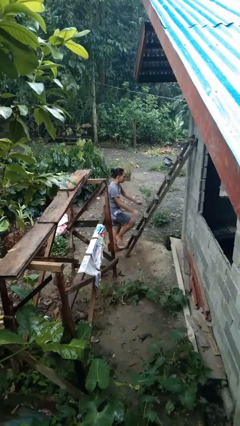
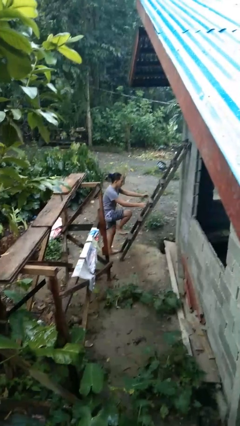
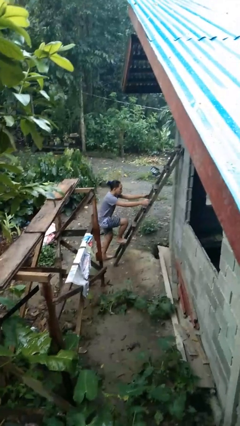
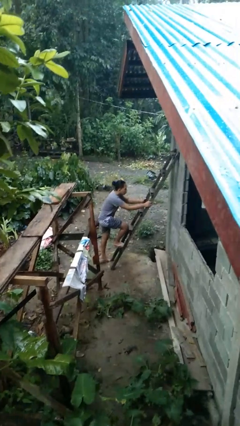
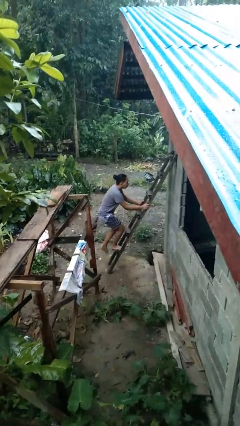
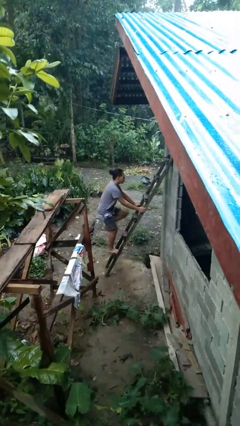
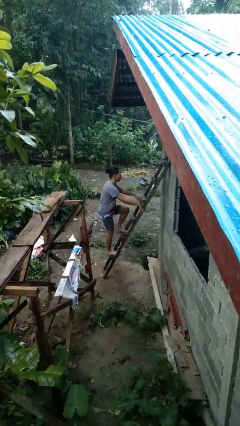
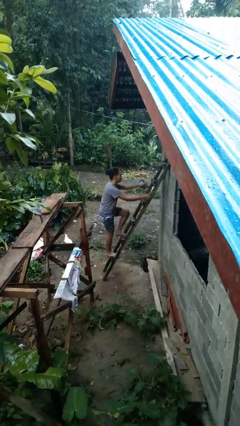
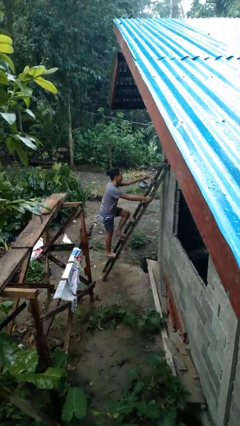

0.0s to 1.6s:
person climbs up ladder

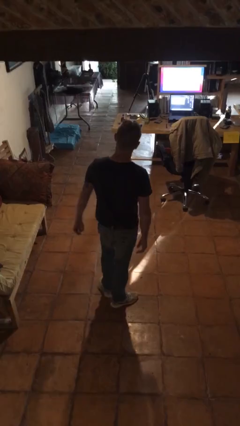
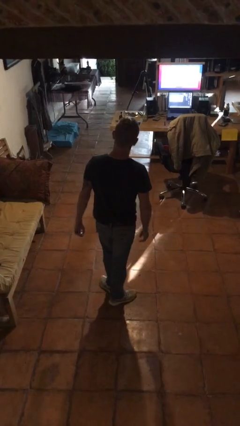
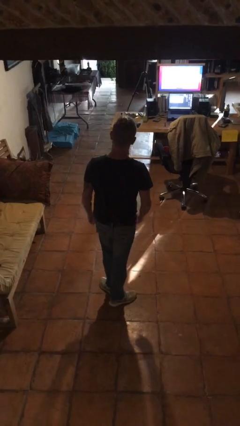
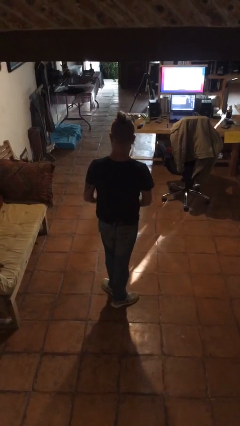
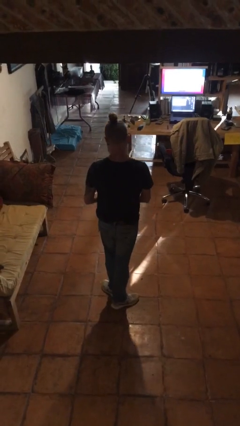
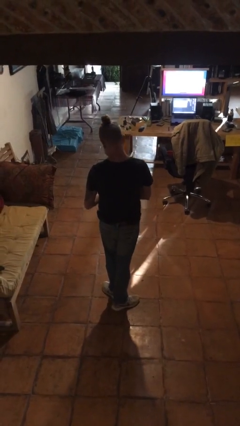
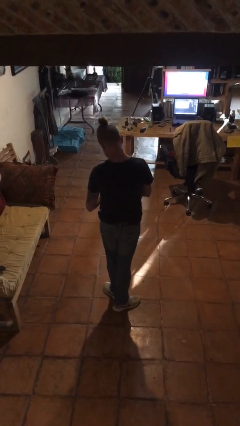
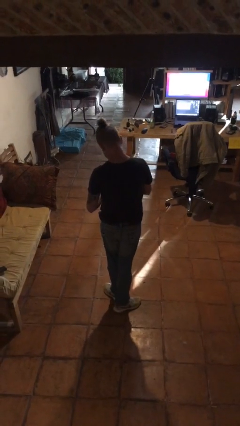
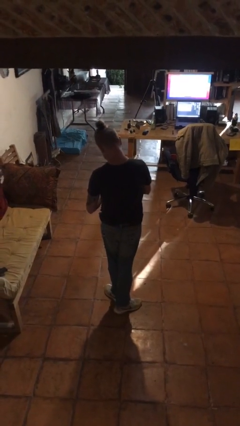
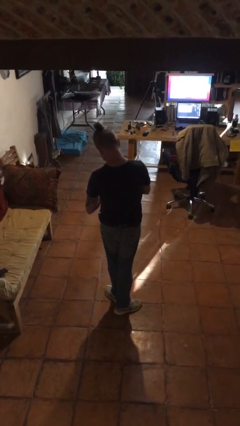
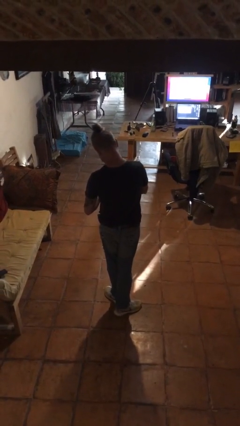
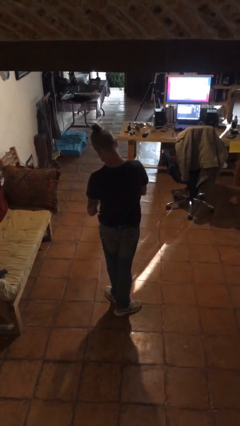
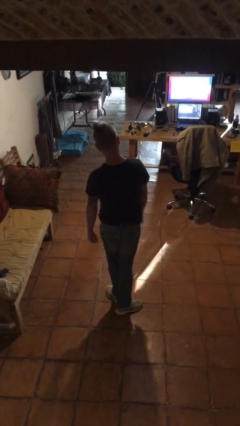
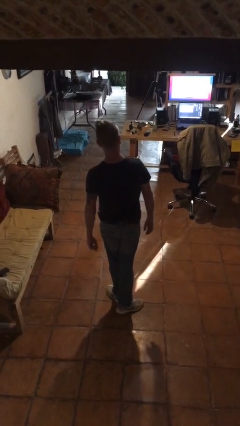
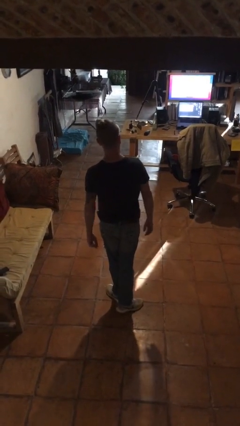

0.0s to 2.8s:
person puts on ring

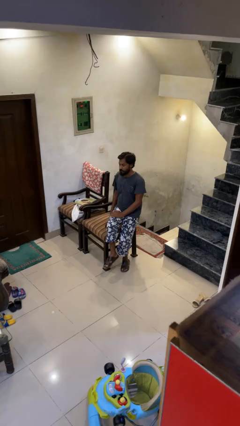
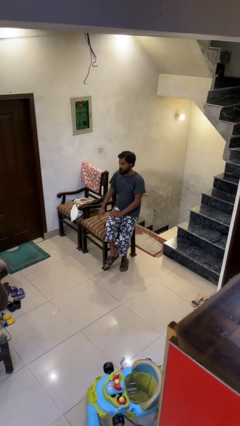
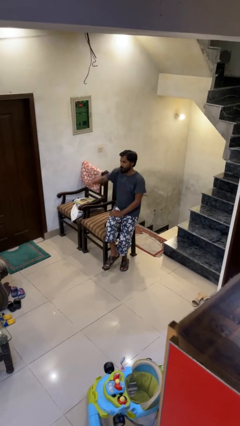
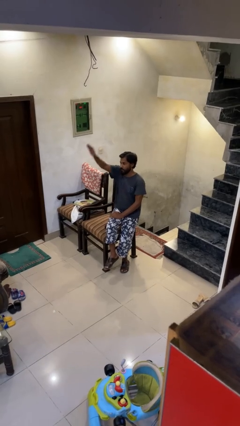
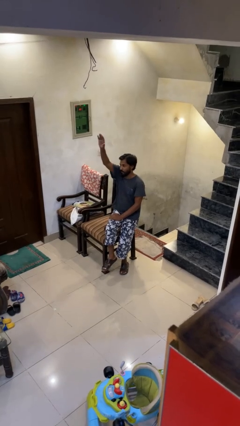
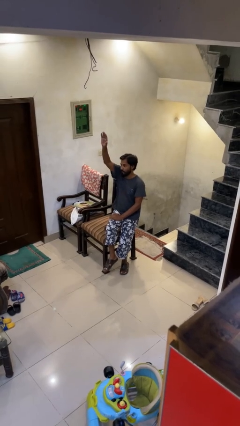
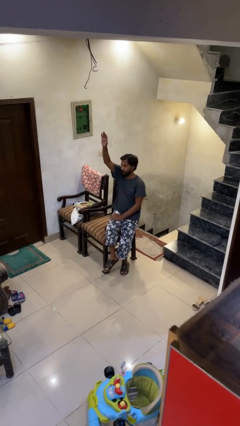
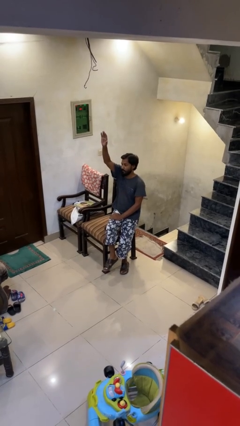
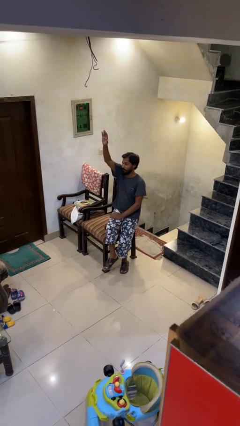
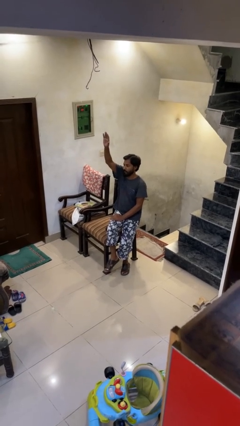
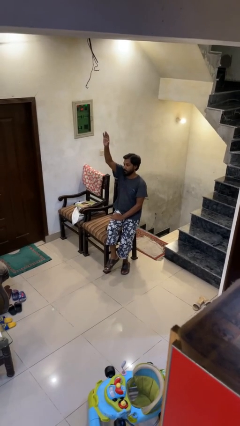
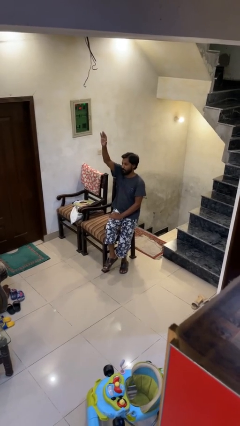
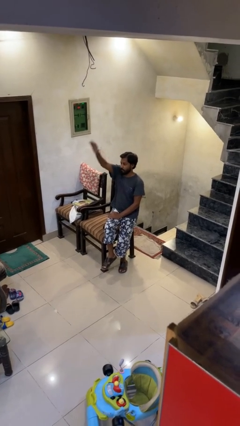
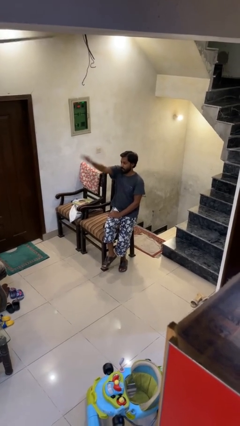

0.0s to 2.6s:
person gestures raise hand

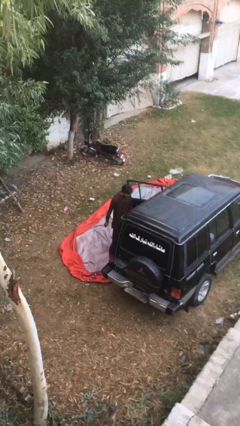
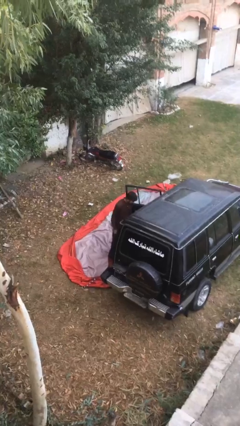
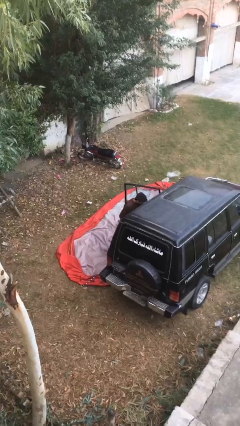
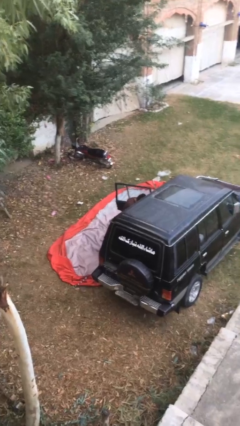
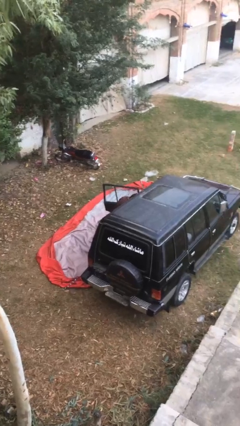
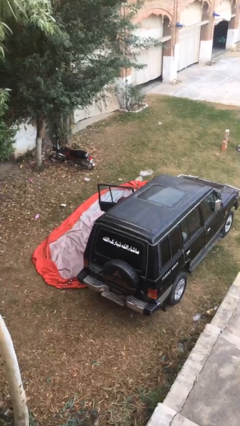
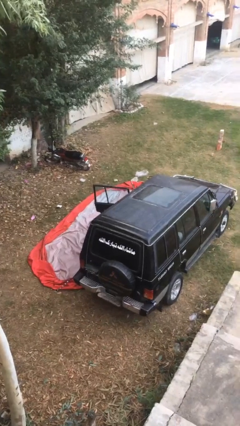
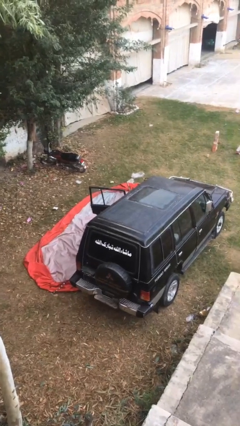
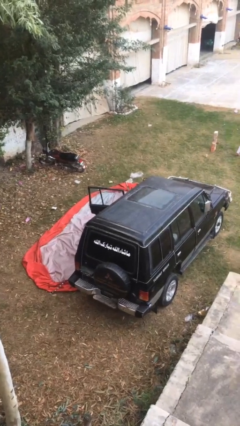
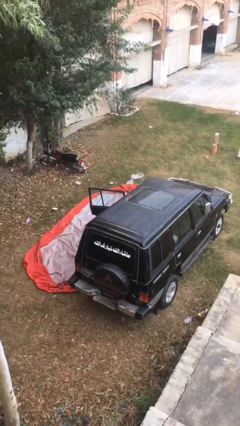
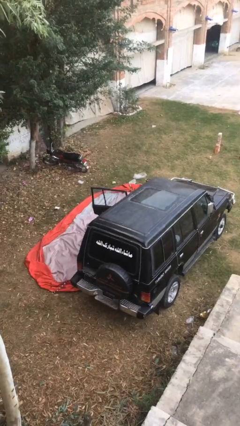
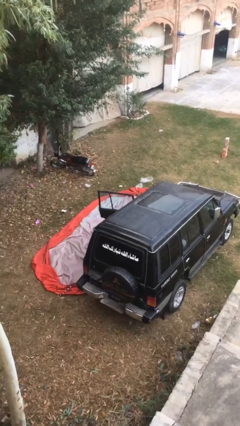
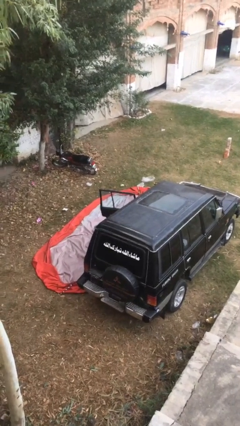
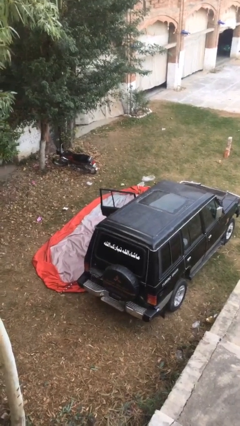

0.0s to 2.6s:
person enters car

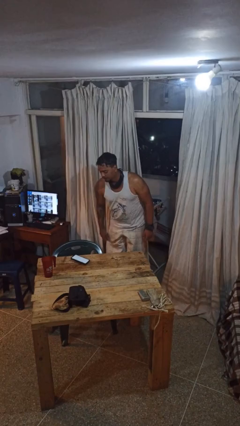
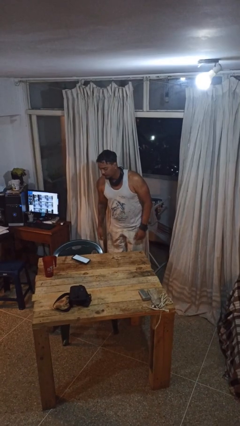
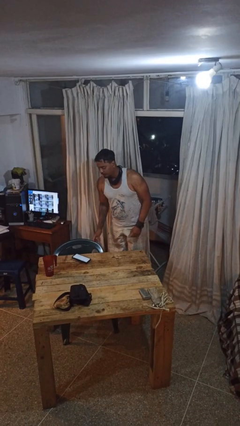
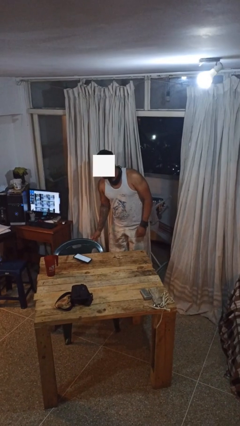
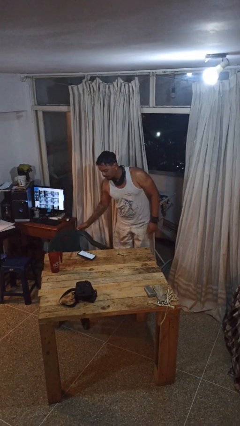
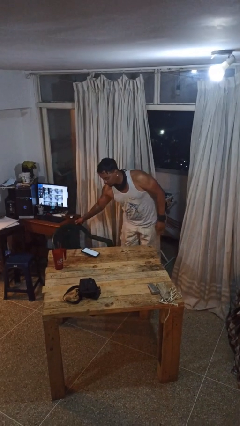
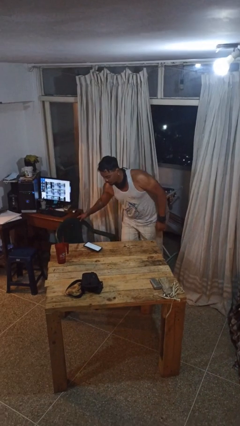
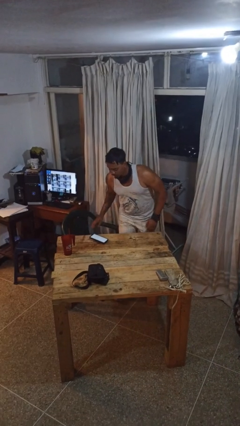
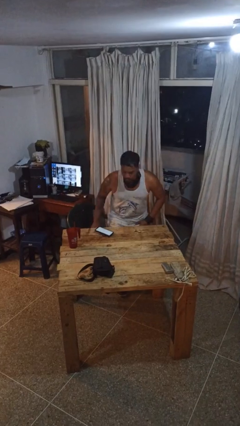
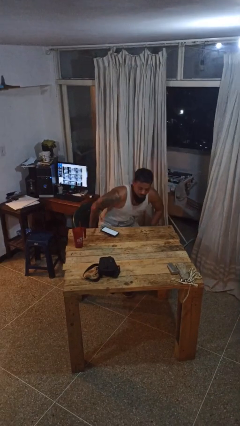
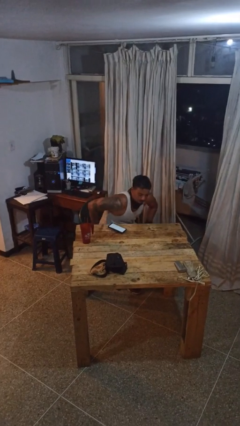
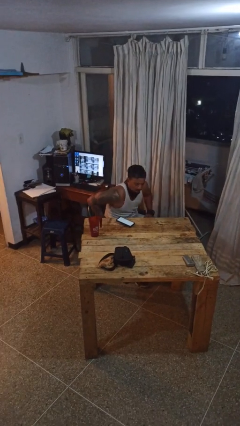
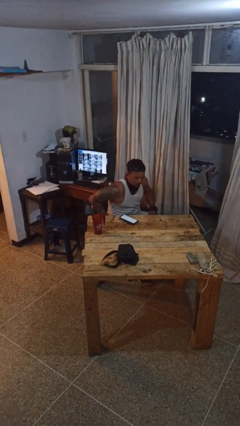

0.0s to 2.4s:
person sits down

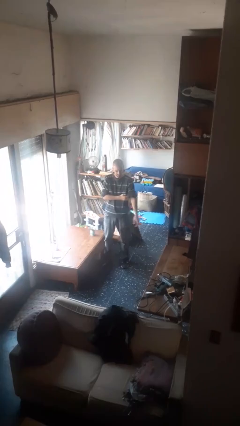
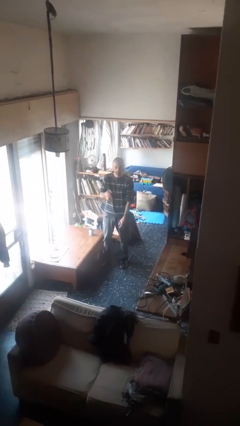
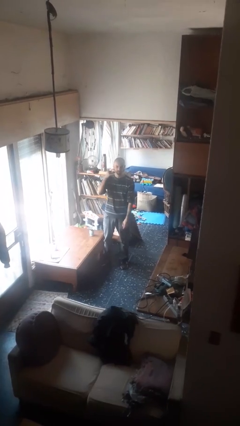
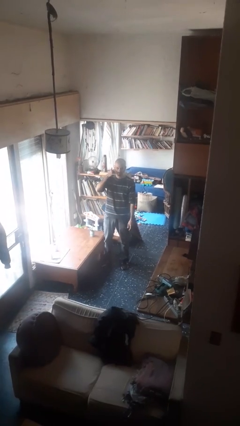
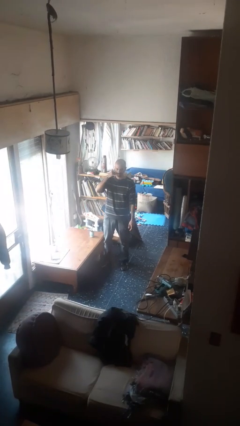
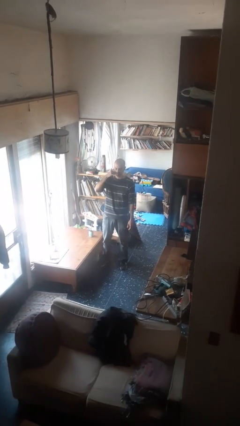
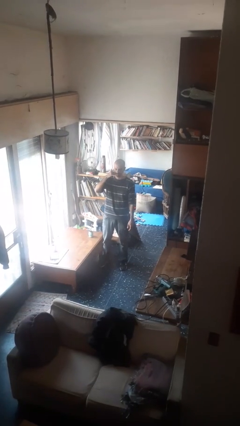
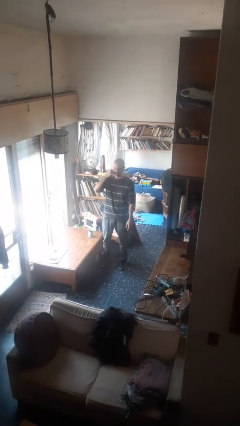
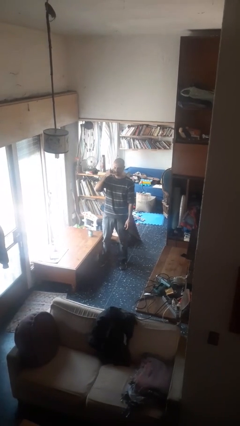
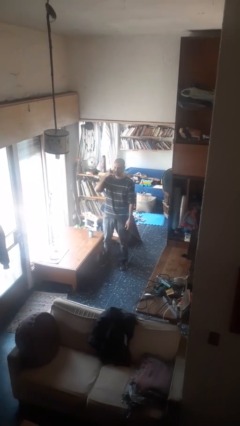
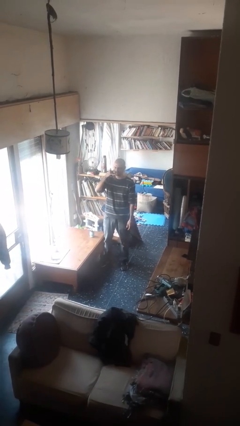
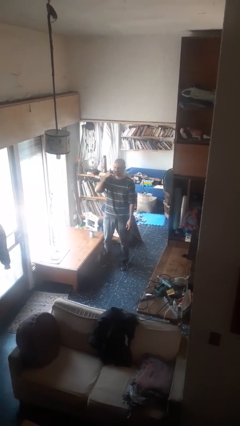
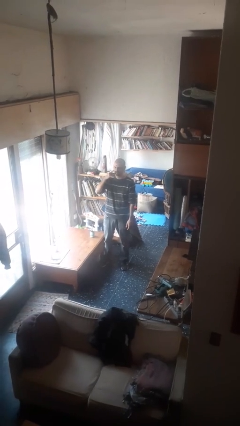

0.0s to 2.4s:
person gestures call me

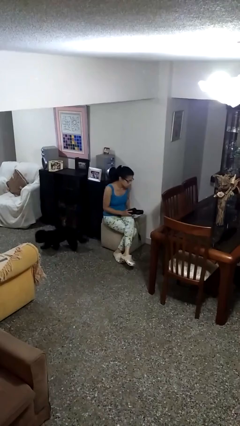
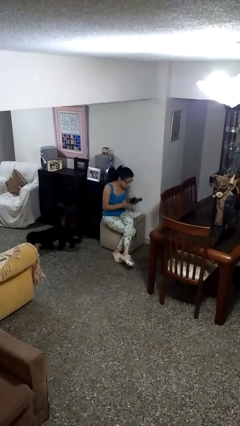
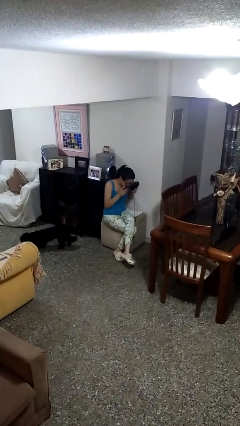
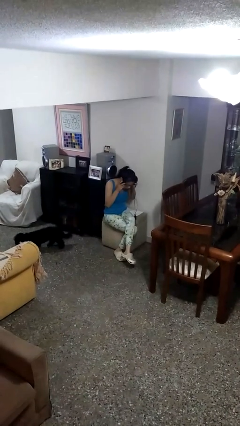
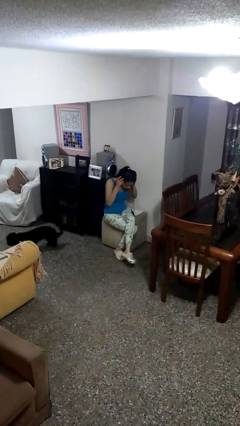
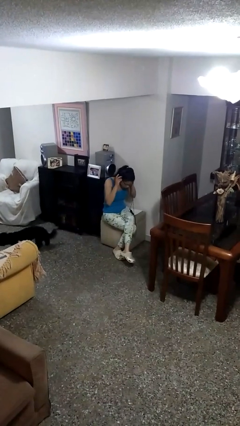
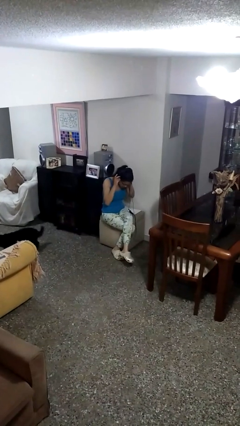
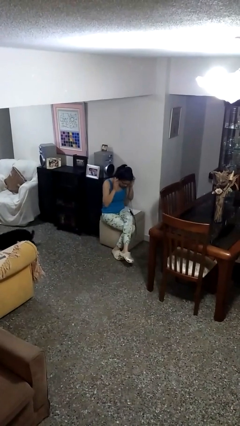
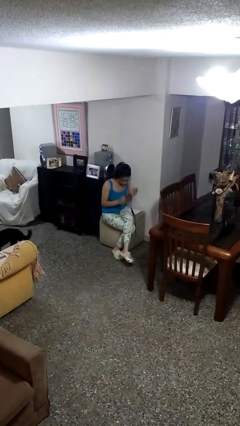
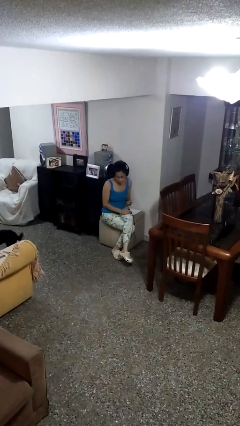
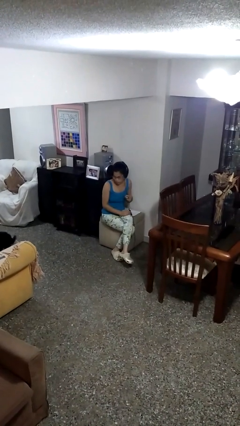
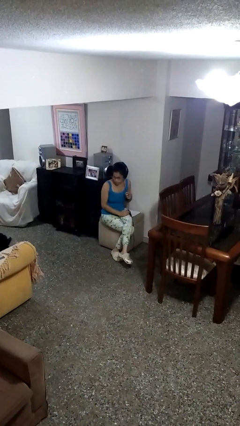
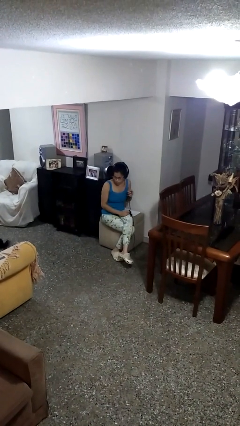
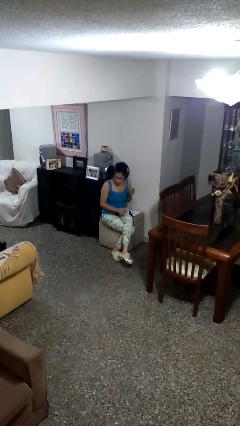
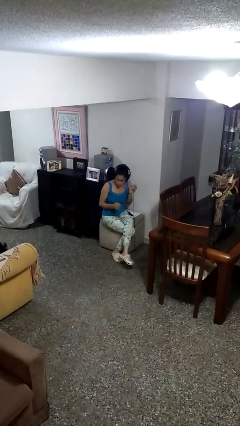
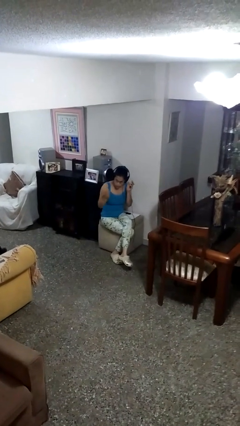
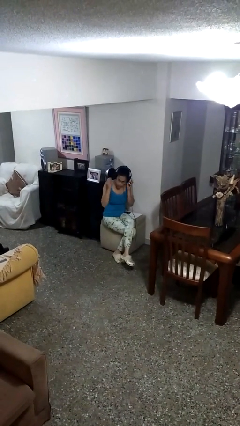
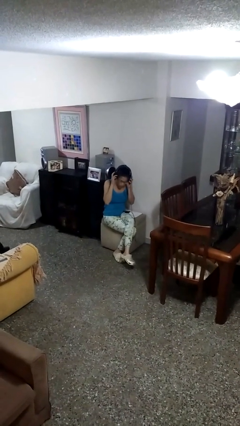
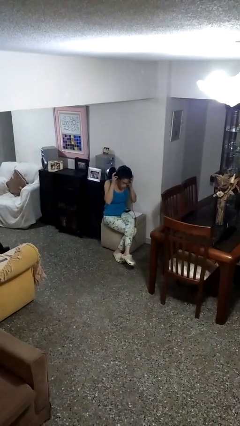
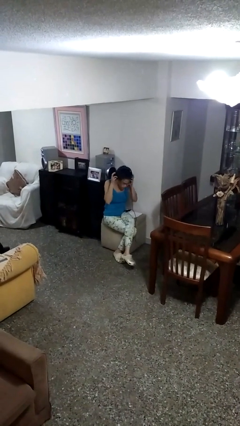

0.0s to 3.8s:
person puts on headphones
